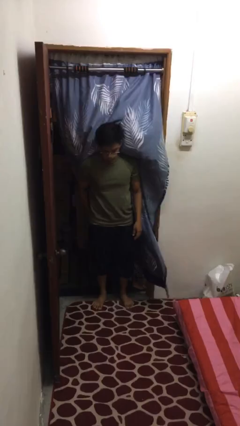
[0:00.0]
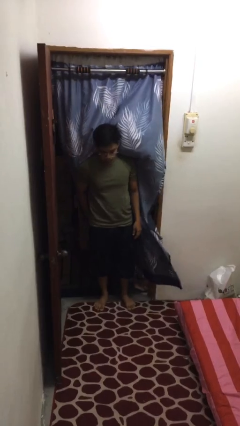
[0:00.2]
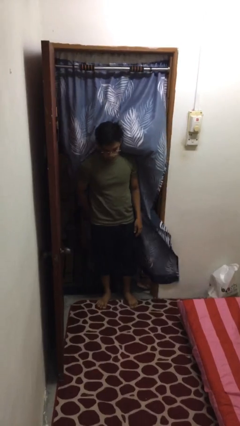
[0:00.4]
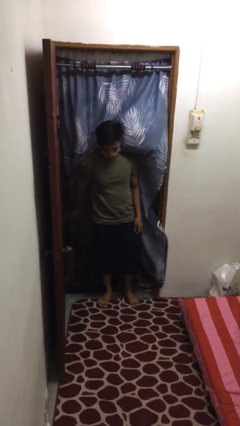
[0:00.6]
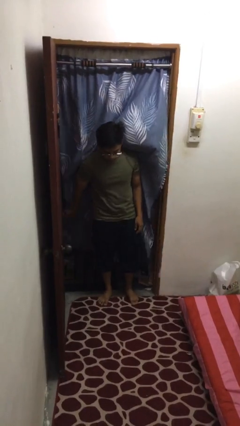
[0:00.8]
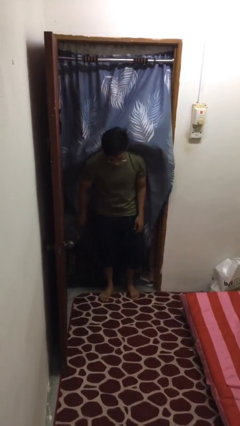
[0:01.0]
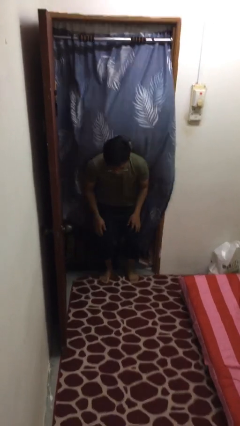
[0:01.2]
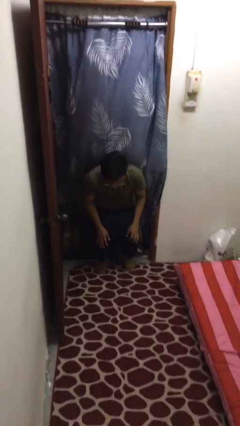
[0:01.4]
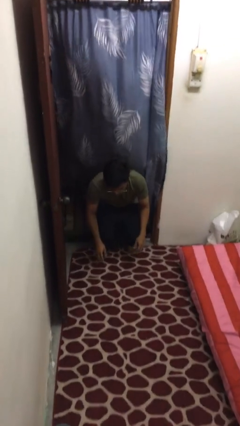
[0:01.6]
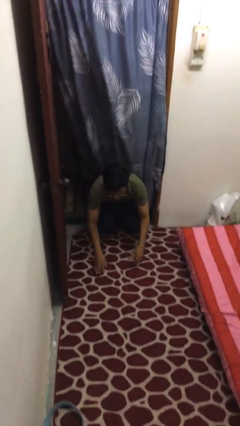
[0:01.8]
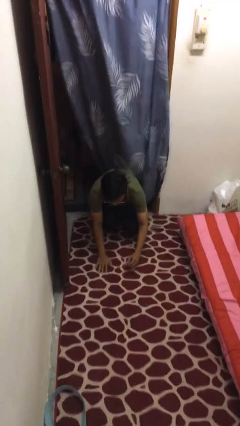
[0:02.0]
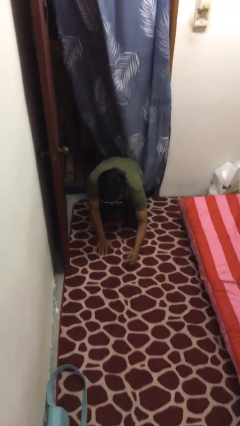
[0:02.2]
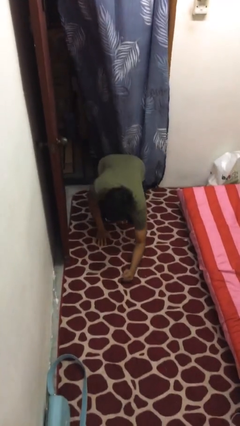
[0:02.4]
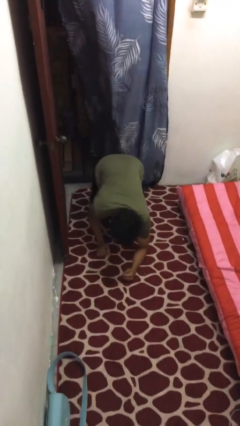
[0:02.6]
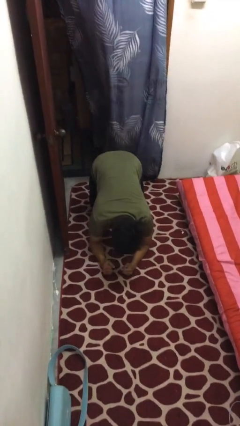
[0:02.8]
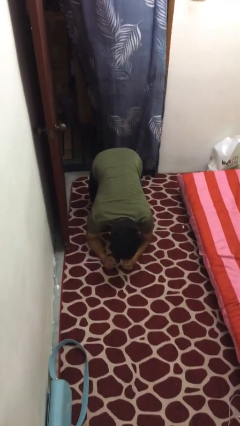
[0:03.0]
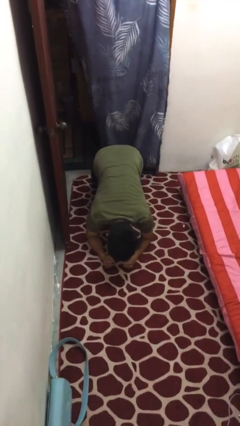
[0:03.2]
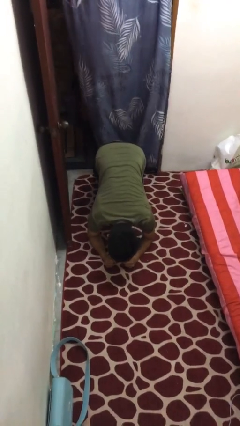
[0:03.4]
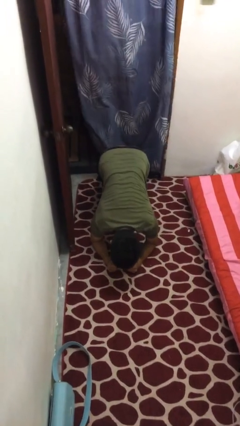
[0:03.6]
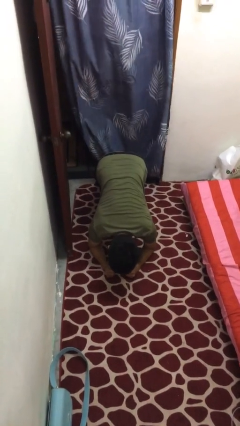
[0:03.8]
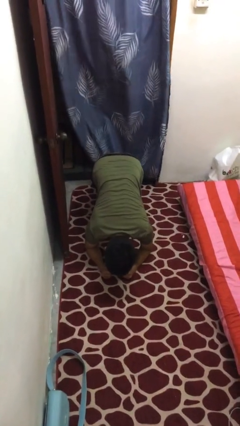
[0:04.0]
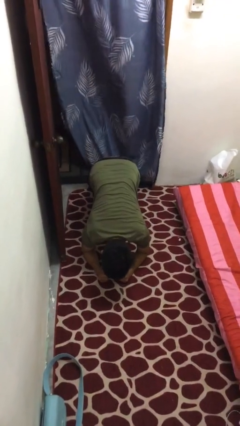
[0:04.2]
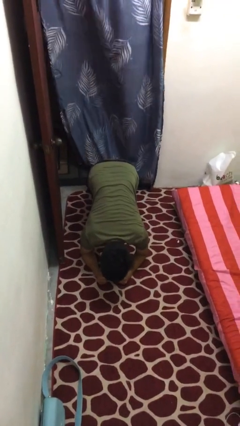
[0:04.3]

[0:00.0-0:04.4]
person exercises with plank

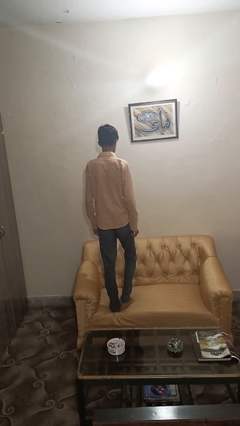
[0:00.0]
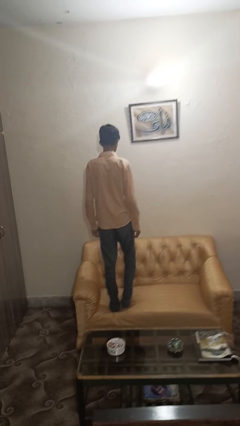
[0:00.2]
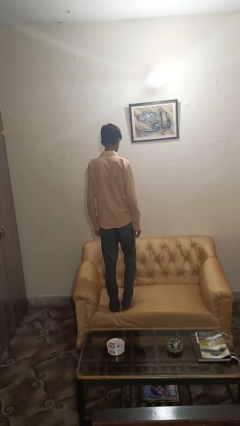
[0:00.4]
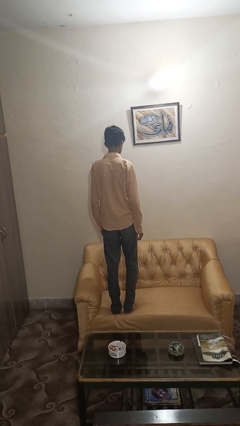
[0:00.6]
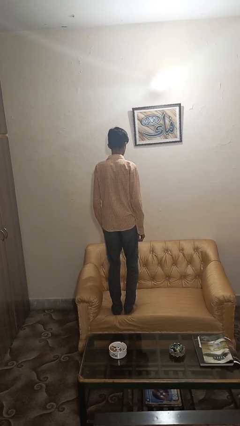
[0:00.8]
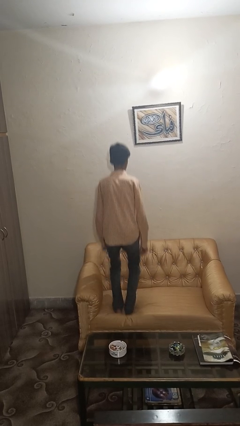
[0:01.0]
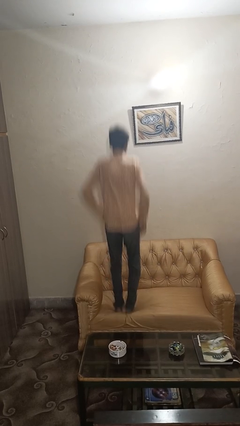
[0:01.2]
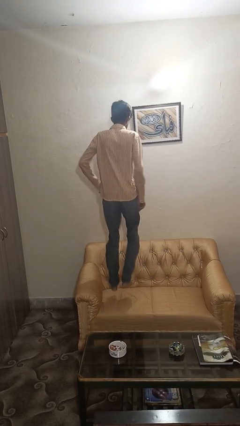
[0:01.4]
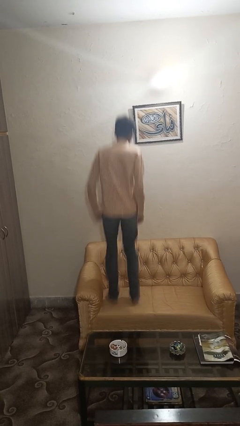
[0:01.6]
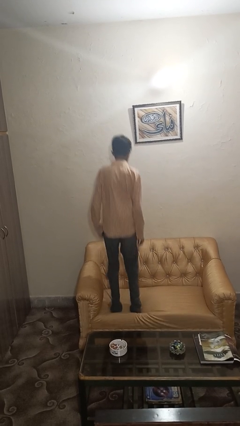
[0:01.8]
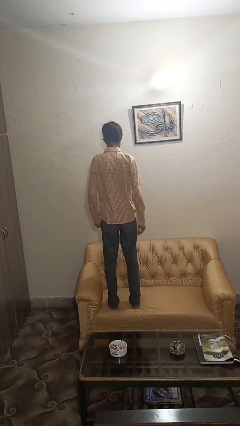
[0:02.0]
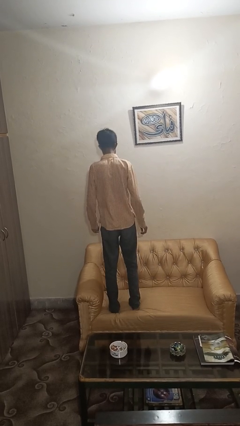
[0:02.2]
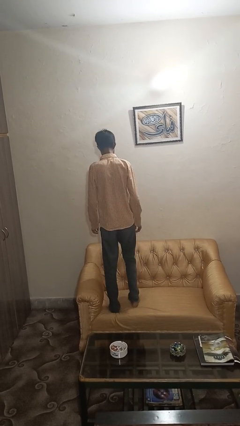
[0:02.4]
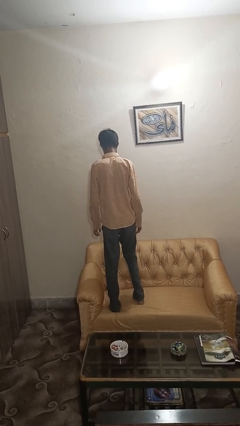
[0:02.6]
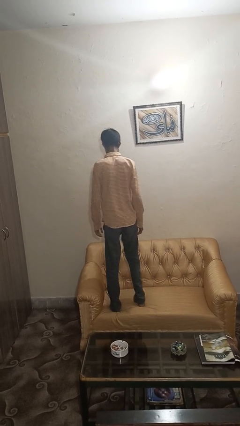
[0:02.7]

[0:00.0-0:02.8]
person jumps on couch

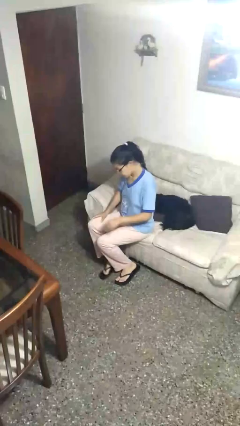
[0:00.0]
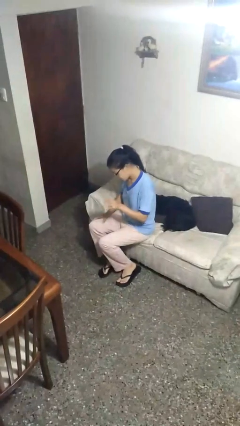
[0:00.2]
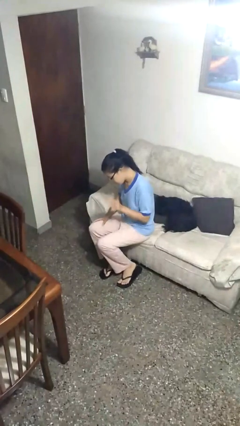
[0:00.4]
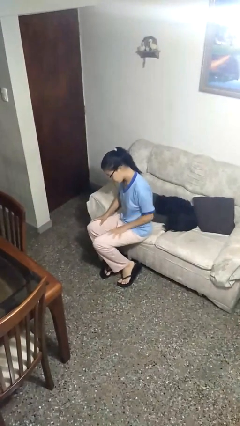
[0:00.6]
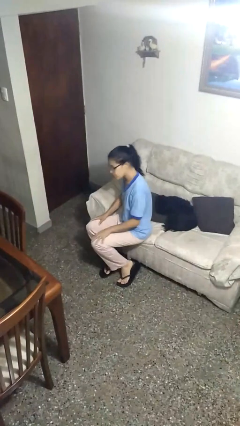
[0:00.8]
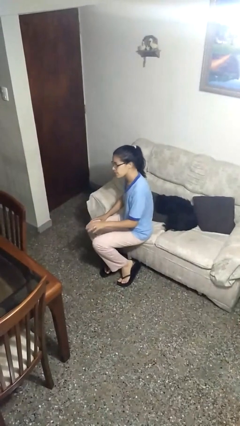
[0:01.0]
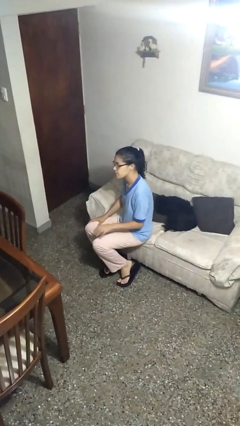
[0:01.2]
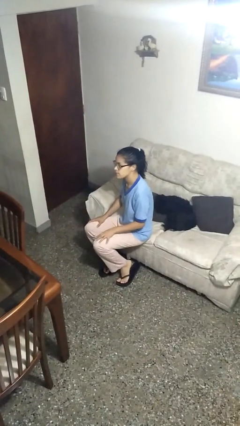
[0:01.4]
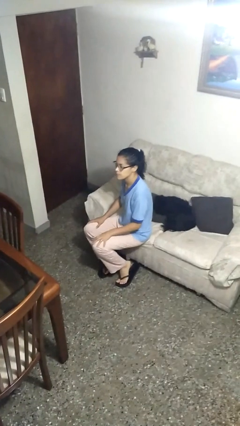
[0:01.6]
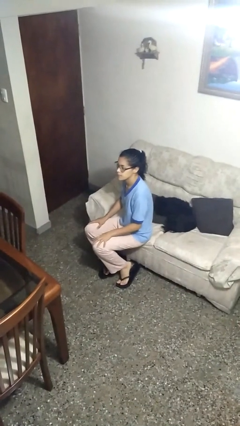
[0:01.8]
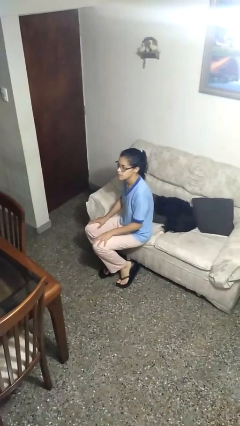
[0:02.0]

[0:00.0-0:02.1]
person slaps hands on thighs

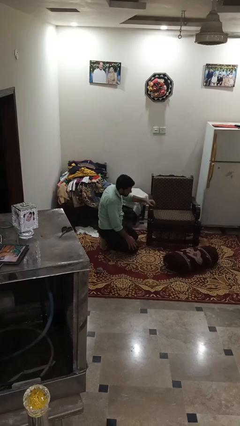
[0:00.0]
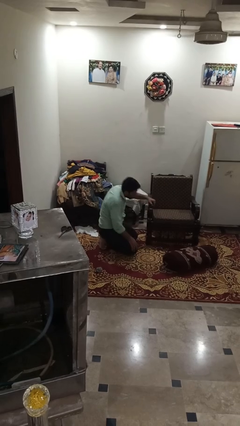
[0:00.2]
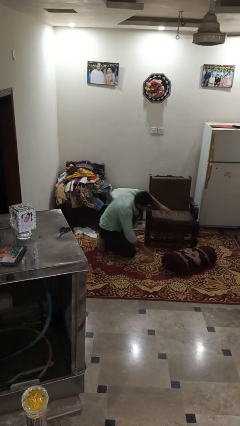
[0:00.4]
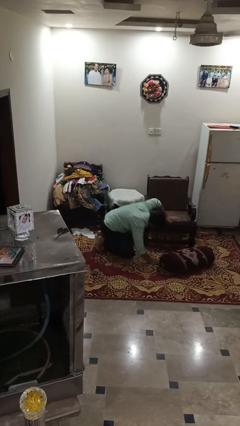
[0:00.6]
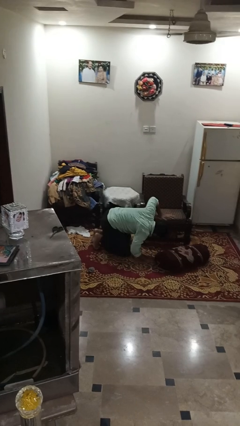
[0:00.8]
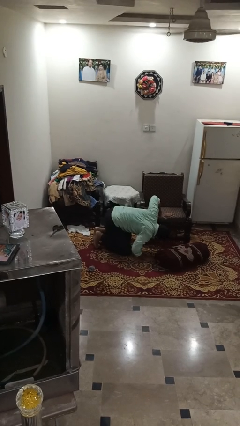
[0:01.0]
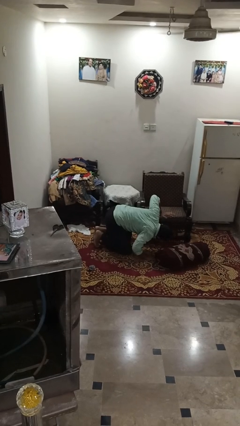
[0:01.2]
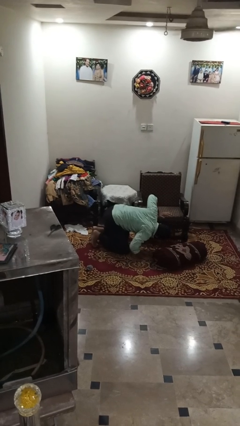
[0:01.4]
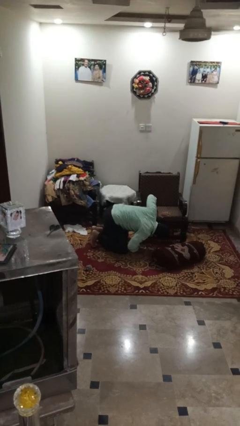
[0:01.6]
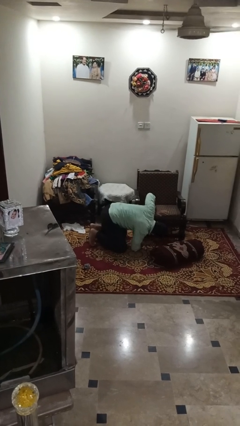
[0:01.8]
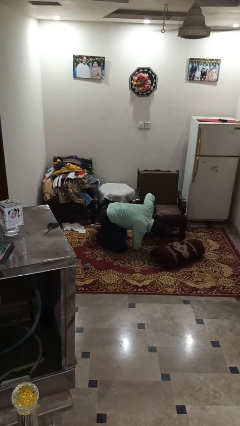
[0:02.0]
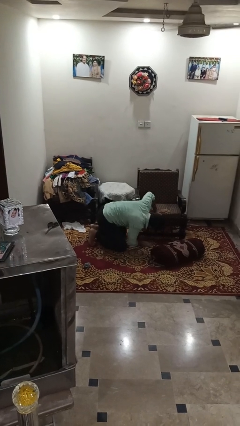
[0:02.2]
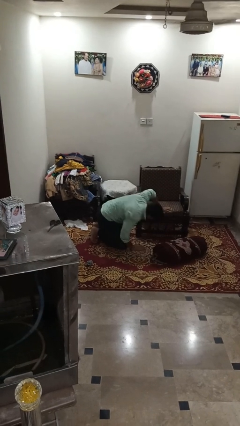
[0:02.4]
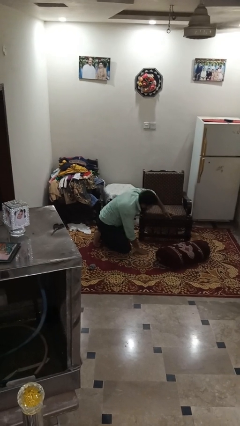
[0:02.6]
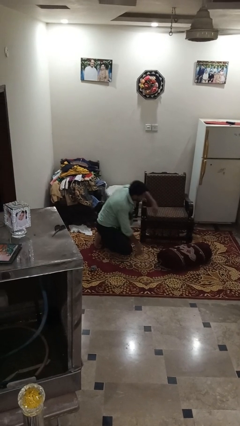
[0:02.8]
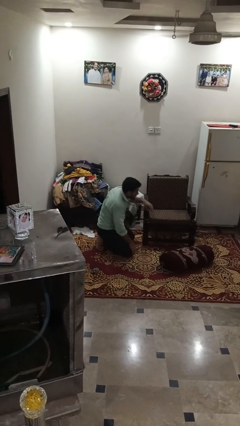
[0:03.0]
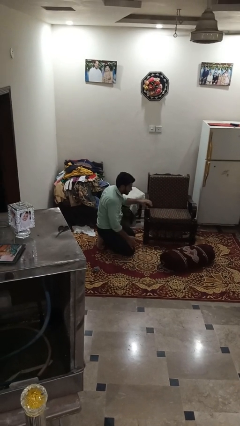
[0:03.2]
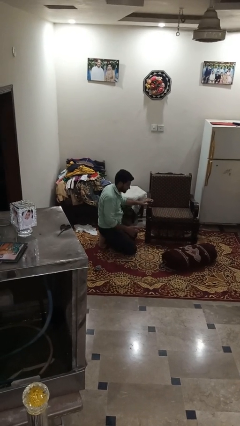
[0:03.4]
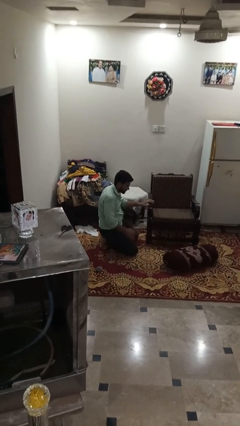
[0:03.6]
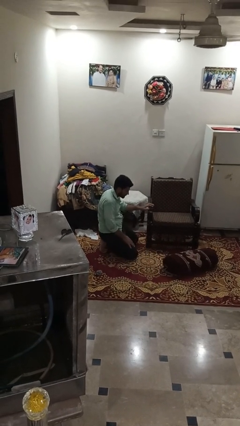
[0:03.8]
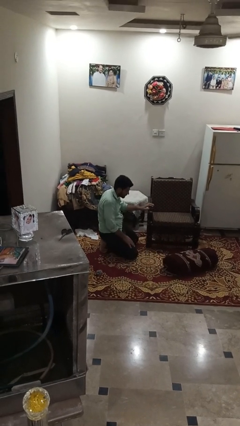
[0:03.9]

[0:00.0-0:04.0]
person searches in couch

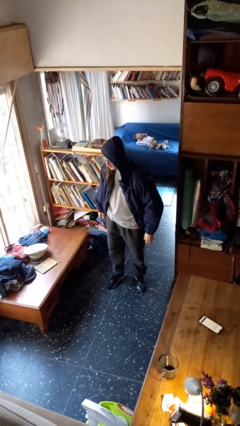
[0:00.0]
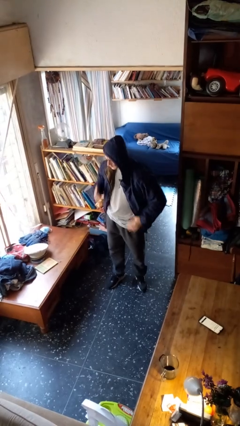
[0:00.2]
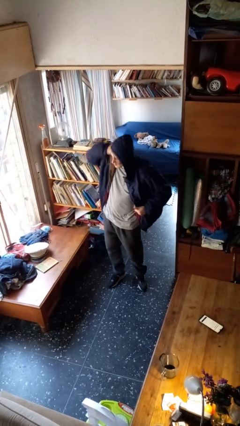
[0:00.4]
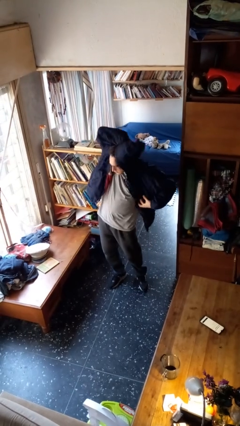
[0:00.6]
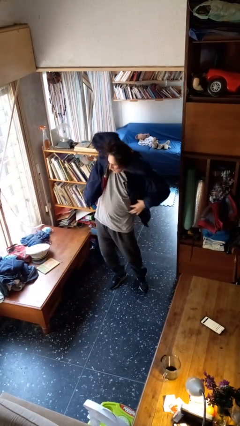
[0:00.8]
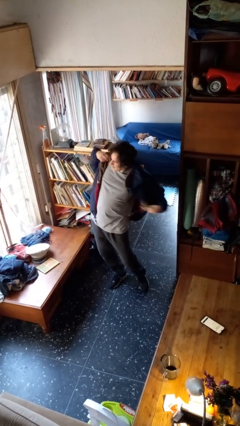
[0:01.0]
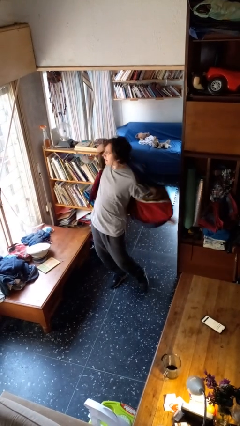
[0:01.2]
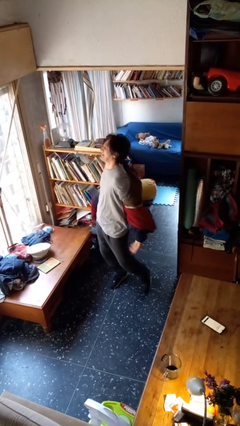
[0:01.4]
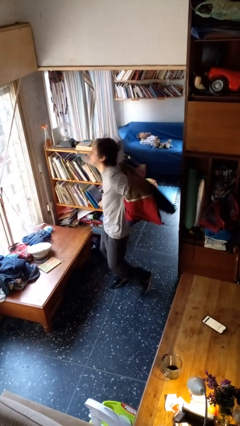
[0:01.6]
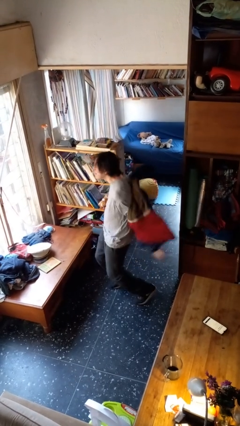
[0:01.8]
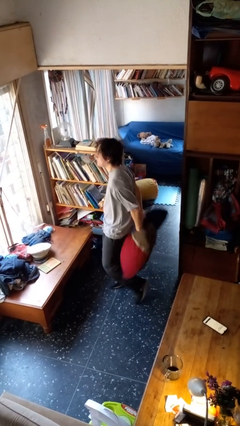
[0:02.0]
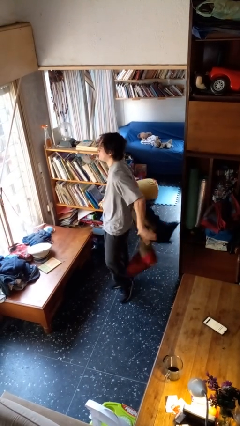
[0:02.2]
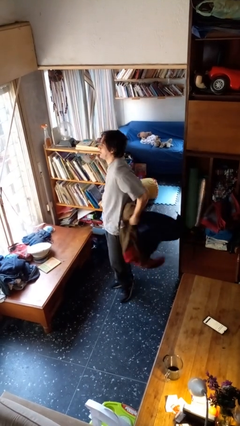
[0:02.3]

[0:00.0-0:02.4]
person takes off hoodie

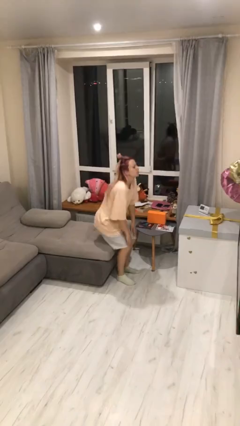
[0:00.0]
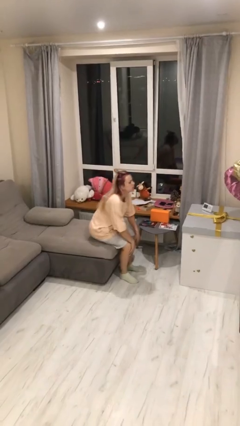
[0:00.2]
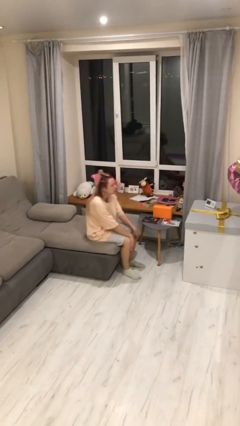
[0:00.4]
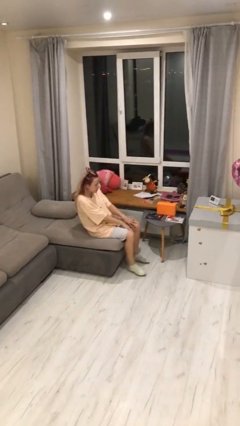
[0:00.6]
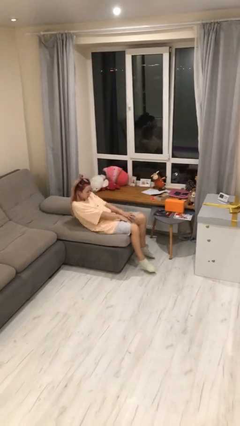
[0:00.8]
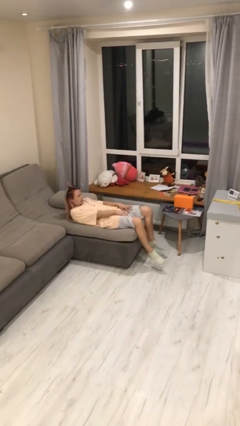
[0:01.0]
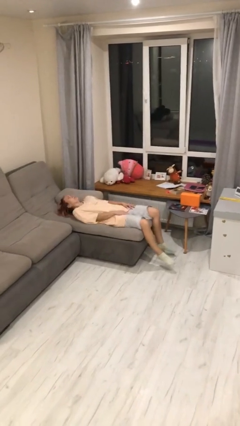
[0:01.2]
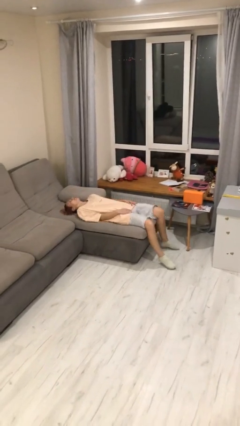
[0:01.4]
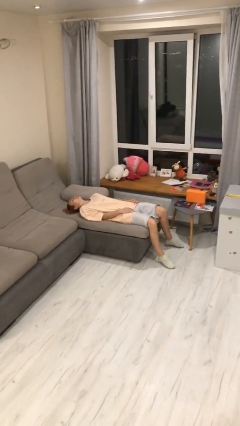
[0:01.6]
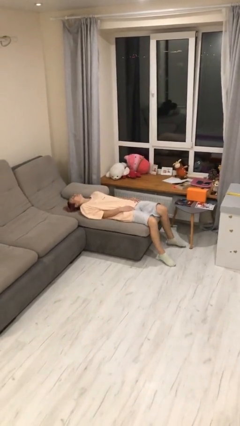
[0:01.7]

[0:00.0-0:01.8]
person lies down on couch

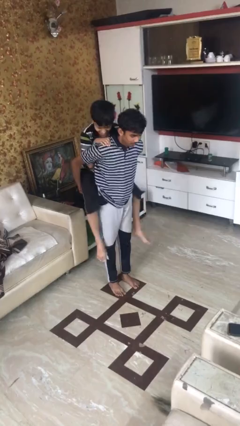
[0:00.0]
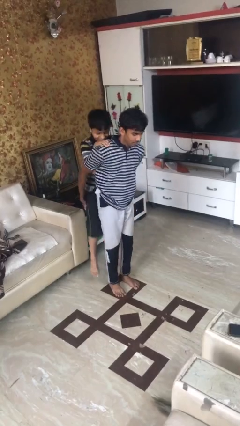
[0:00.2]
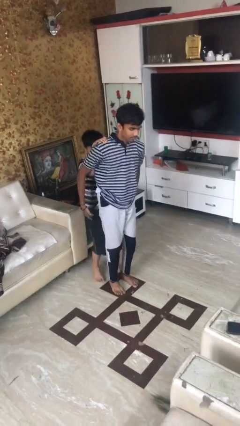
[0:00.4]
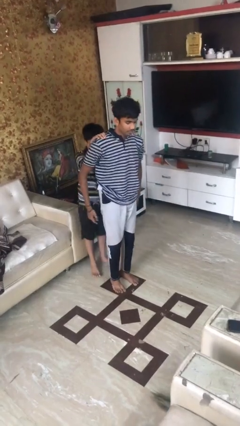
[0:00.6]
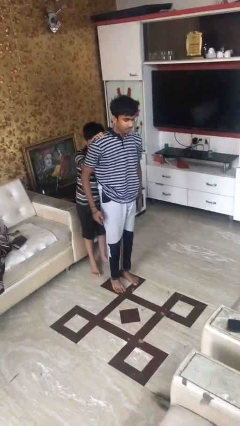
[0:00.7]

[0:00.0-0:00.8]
person puts down person
